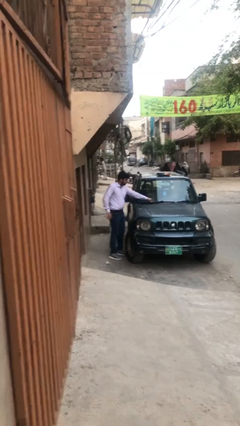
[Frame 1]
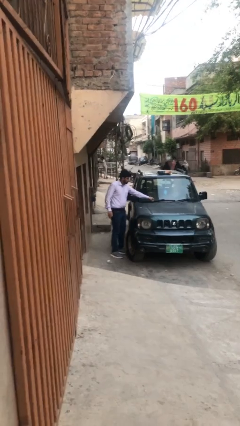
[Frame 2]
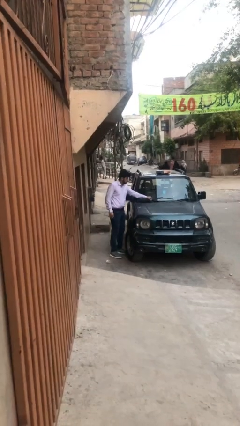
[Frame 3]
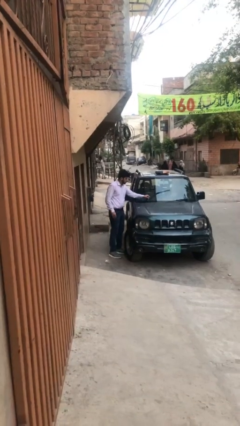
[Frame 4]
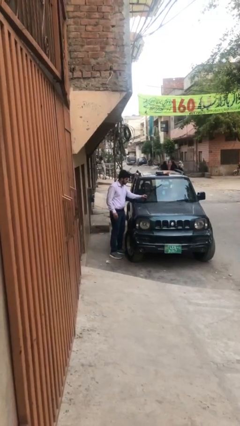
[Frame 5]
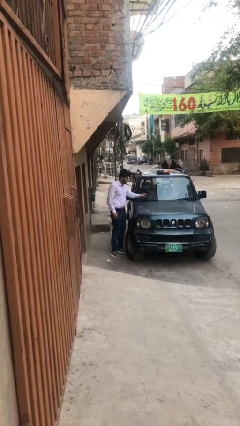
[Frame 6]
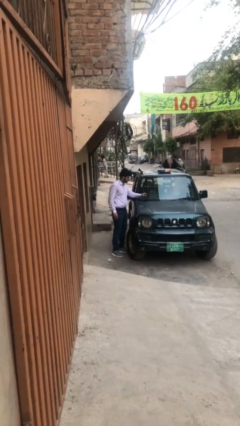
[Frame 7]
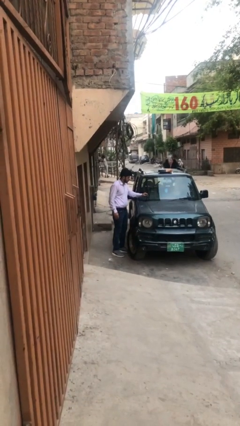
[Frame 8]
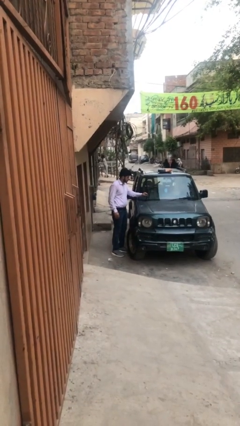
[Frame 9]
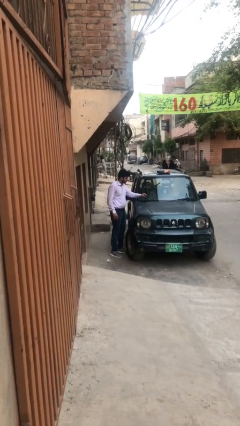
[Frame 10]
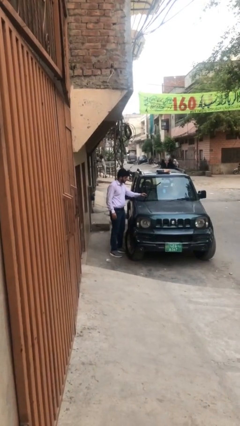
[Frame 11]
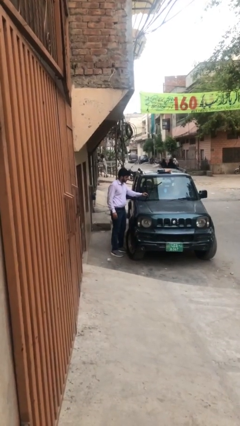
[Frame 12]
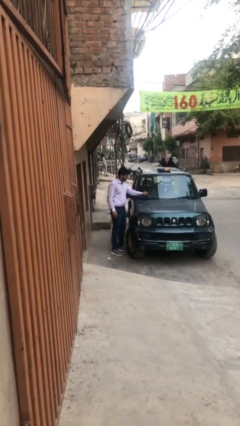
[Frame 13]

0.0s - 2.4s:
person flips up car wipers

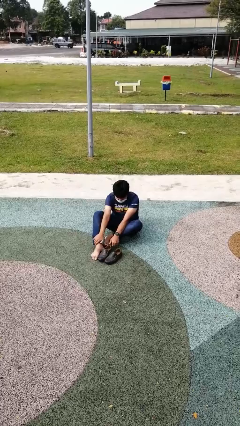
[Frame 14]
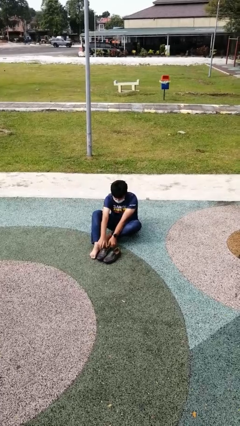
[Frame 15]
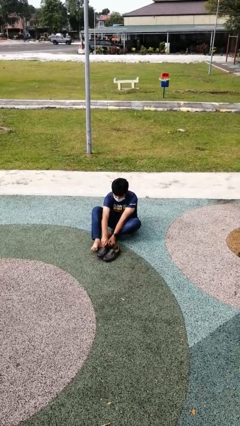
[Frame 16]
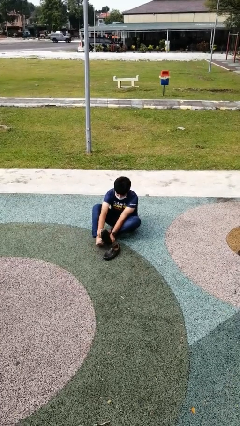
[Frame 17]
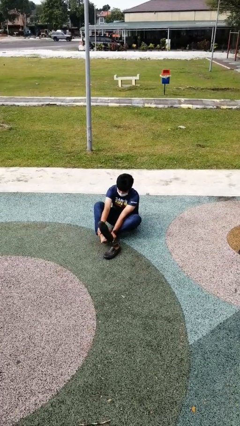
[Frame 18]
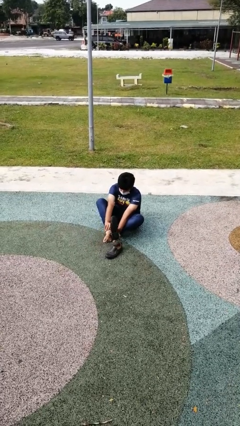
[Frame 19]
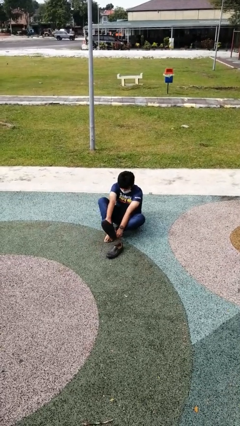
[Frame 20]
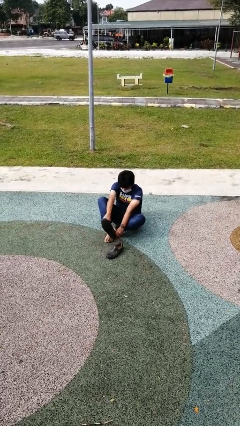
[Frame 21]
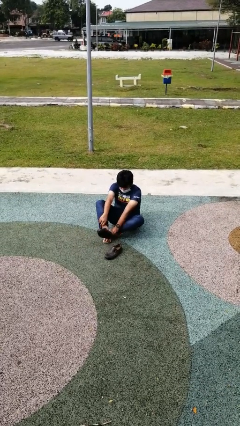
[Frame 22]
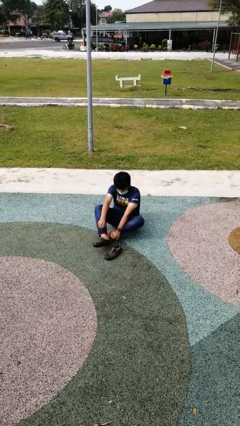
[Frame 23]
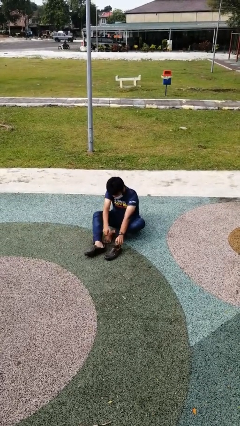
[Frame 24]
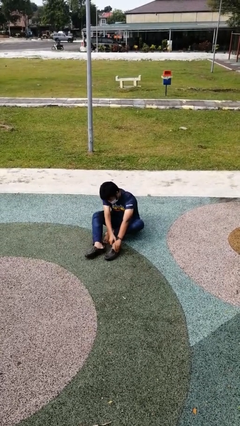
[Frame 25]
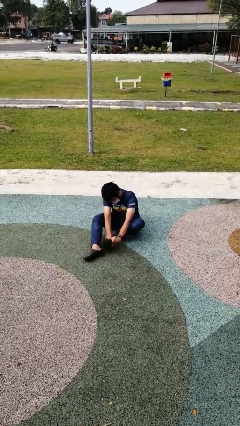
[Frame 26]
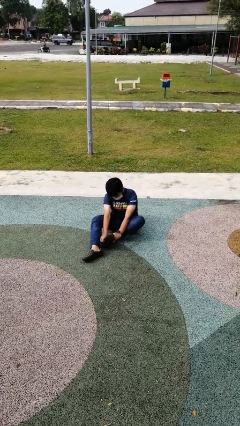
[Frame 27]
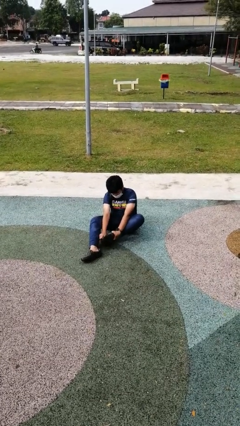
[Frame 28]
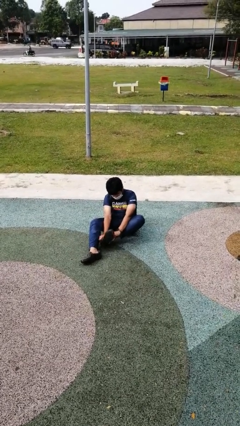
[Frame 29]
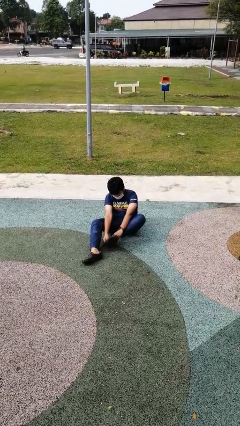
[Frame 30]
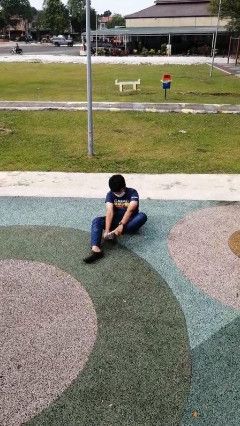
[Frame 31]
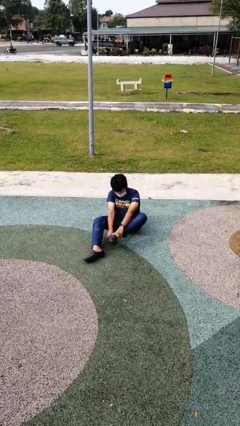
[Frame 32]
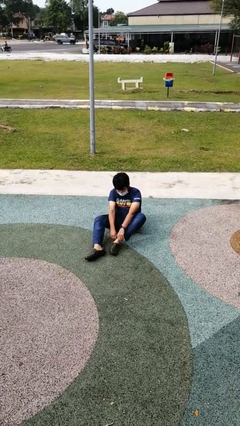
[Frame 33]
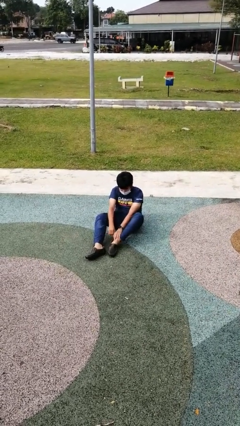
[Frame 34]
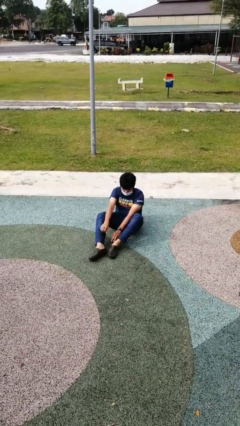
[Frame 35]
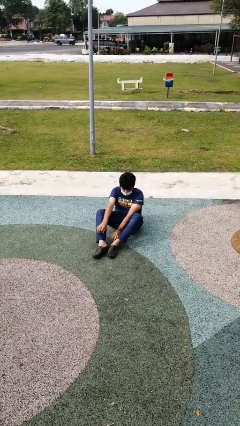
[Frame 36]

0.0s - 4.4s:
person puts on shoes

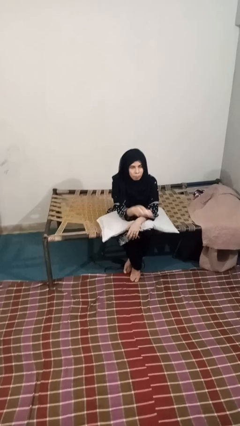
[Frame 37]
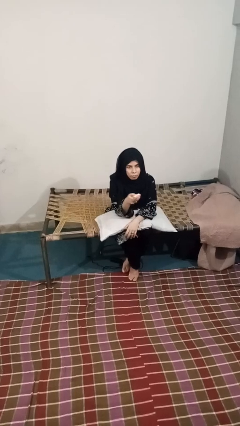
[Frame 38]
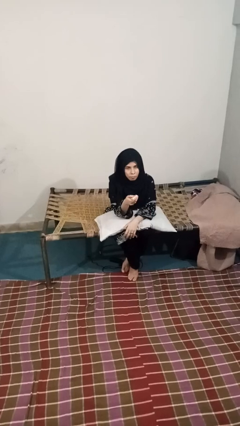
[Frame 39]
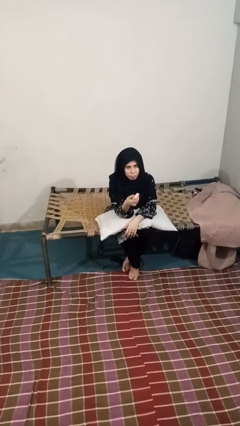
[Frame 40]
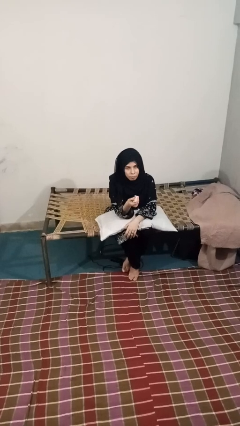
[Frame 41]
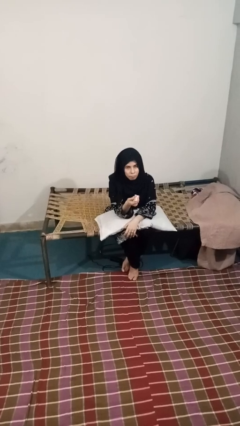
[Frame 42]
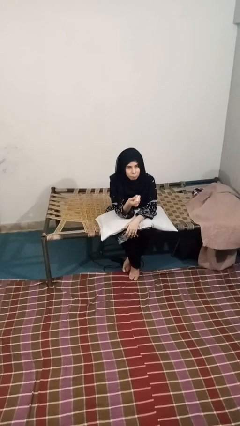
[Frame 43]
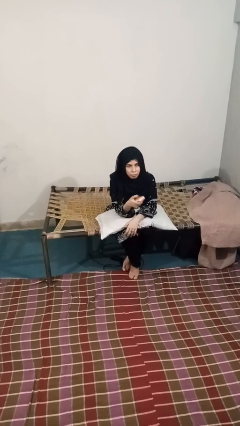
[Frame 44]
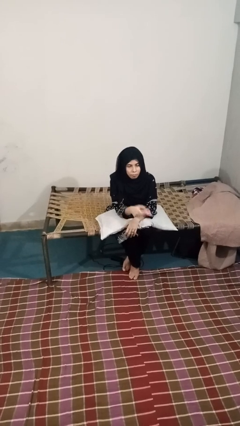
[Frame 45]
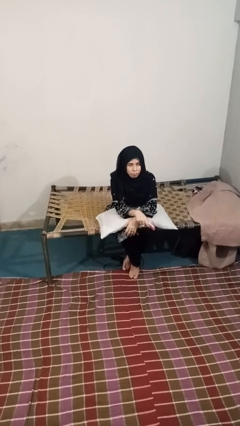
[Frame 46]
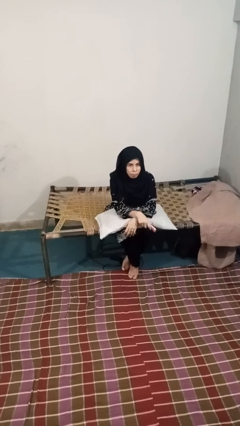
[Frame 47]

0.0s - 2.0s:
person uses television remote

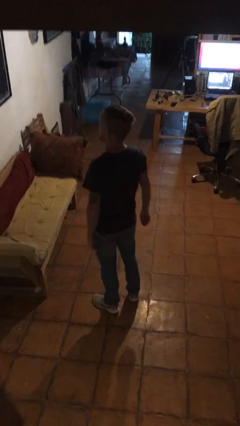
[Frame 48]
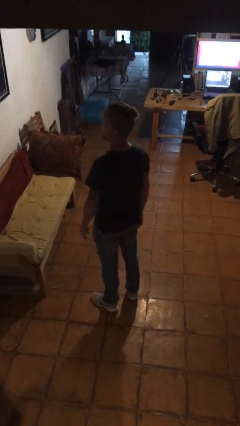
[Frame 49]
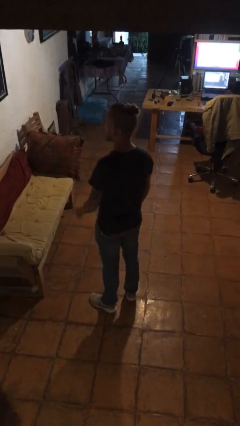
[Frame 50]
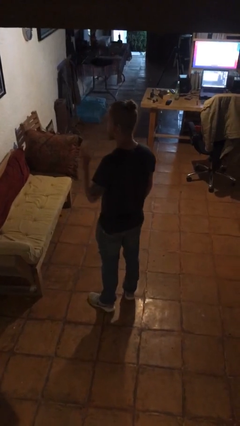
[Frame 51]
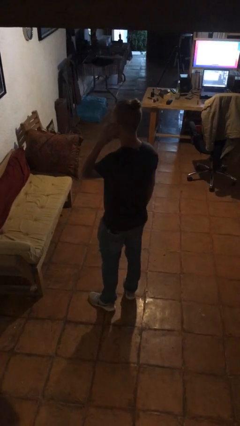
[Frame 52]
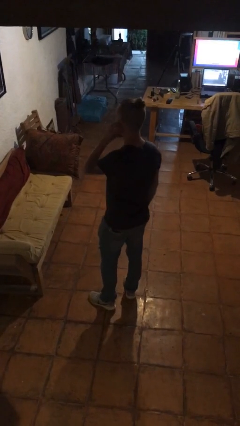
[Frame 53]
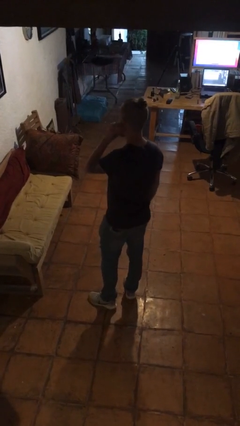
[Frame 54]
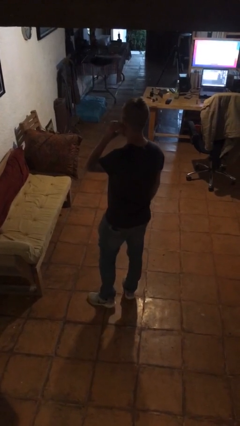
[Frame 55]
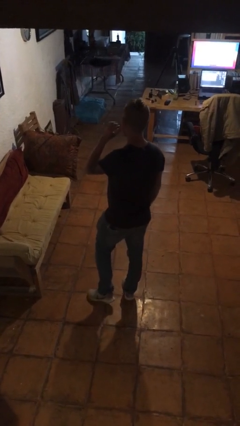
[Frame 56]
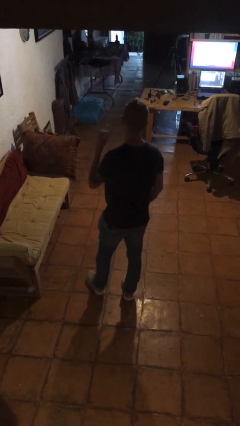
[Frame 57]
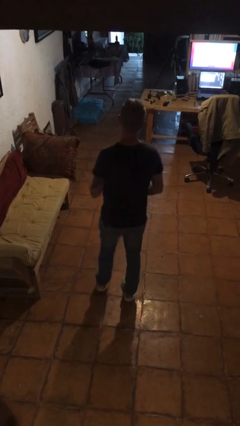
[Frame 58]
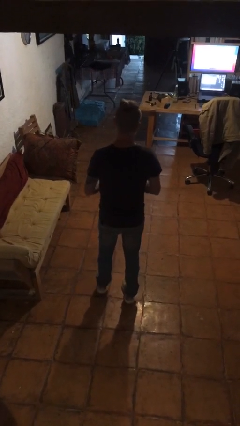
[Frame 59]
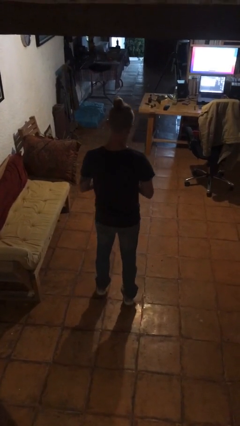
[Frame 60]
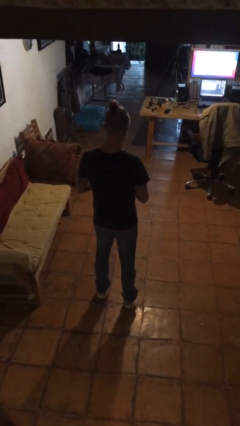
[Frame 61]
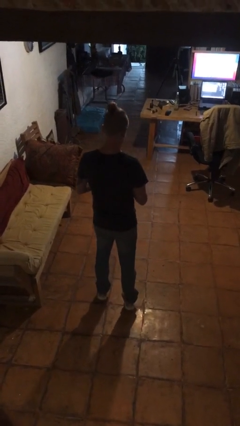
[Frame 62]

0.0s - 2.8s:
person takes off earrings

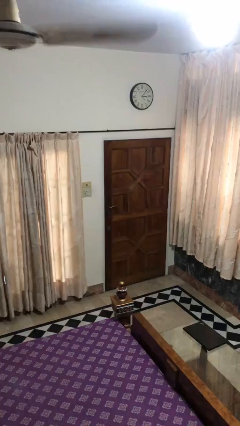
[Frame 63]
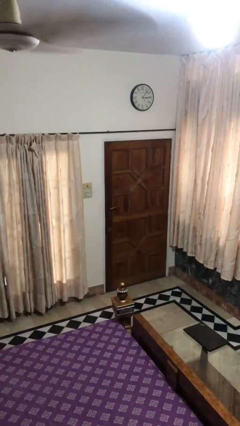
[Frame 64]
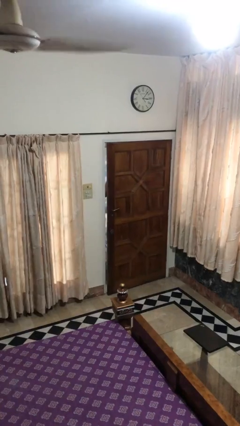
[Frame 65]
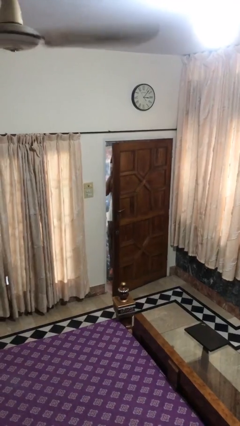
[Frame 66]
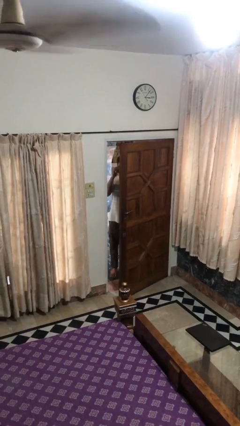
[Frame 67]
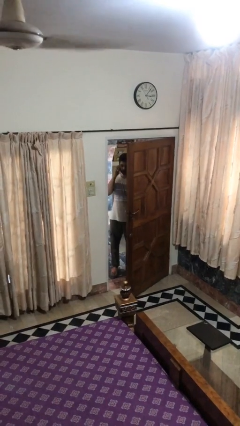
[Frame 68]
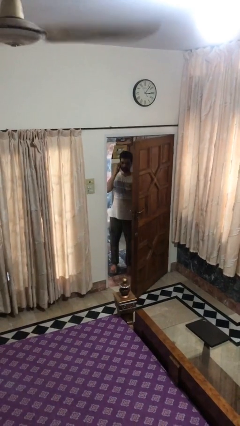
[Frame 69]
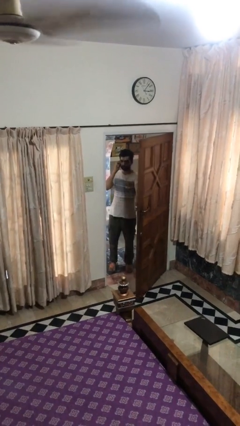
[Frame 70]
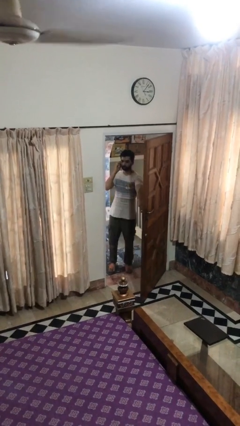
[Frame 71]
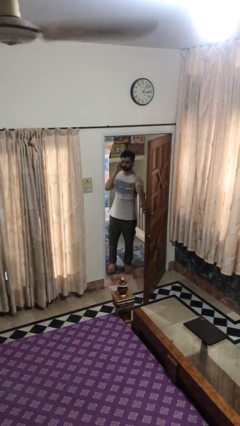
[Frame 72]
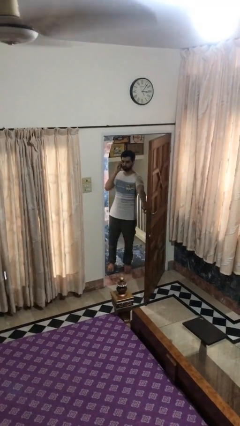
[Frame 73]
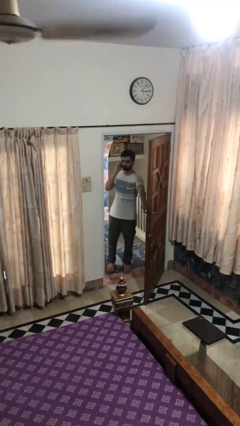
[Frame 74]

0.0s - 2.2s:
person opens facility door

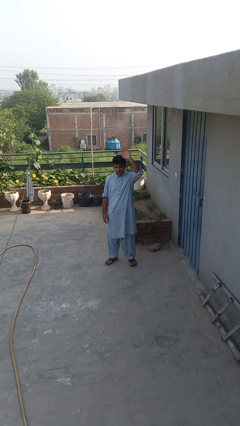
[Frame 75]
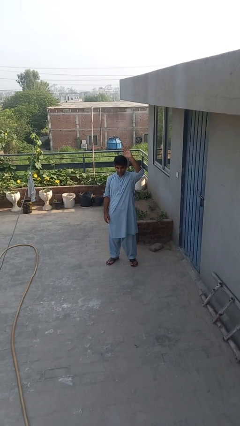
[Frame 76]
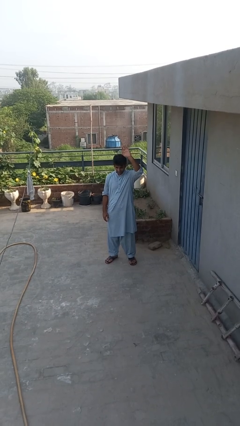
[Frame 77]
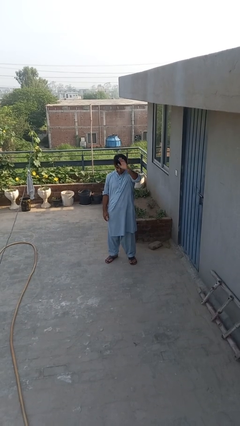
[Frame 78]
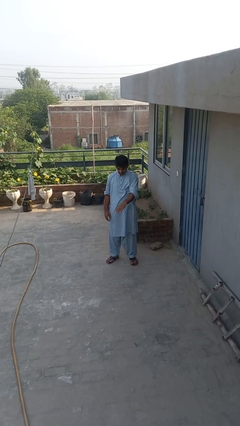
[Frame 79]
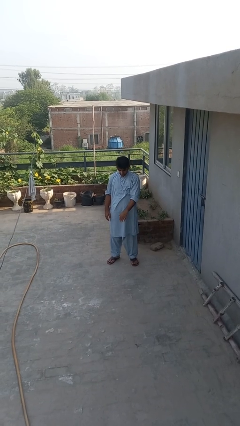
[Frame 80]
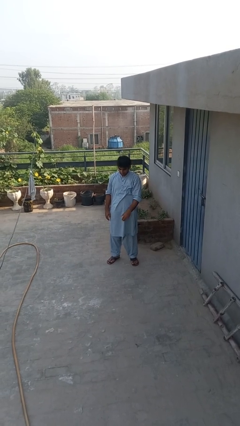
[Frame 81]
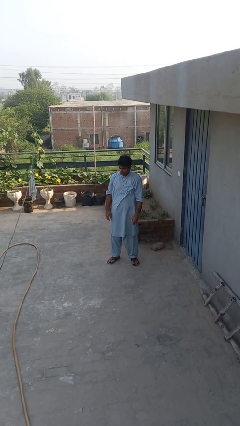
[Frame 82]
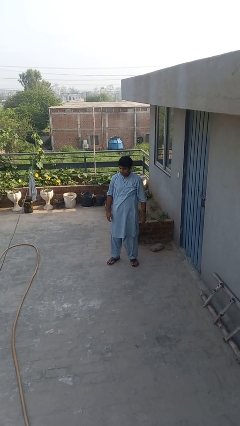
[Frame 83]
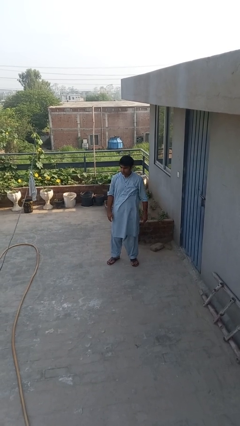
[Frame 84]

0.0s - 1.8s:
person gestures swipe down

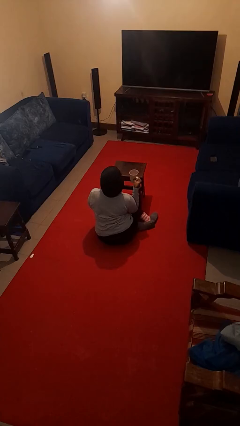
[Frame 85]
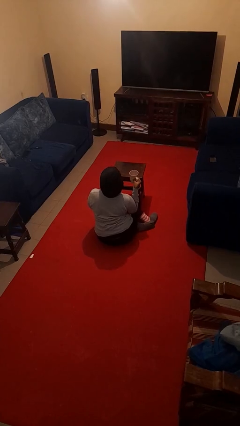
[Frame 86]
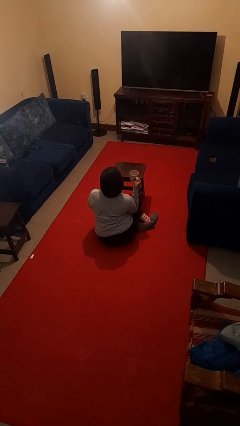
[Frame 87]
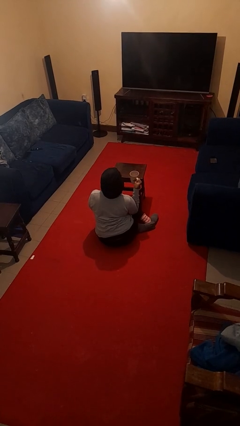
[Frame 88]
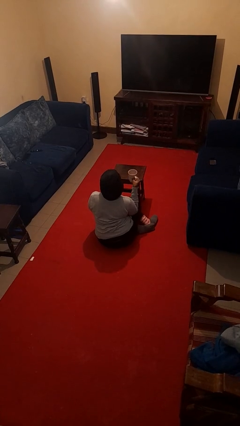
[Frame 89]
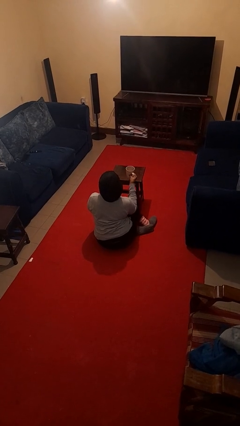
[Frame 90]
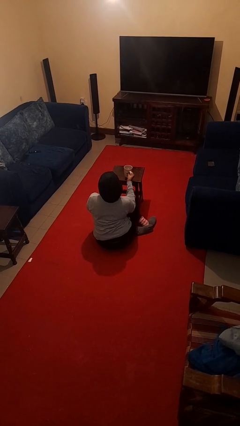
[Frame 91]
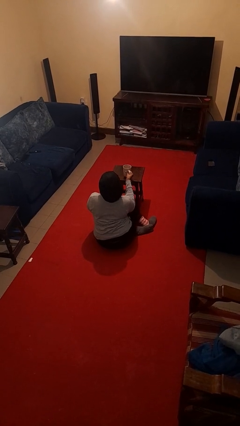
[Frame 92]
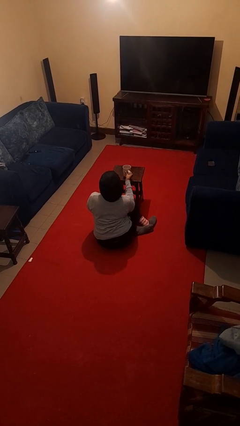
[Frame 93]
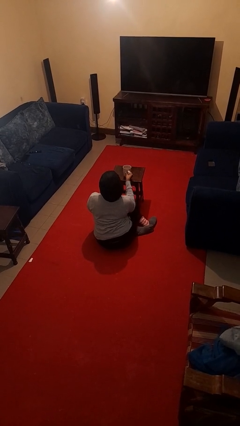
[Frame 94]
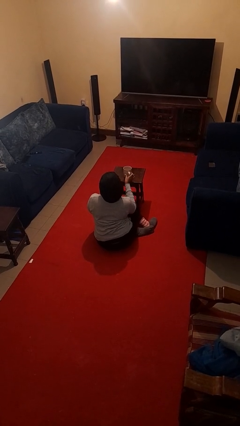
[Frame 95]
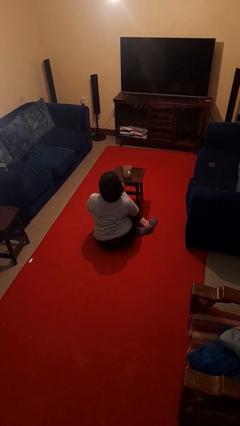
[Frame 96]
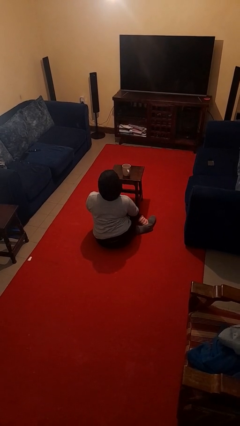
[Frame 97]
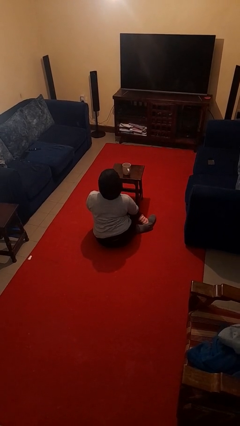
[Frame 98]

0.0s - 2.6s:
person puts down object on table
